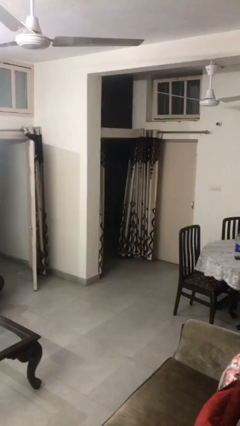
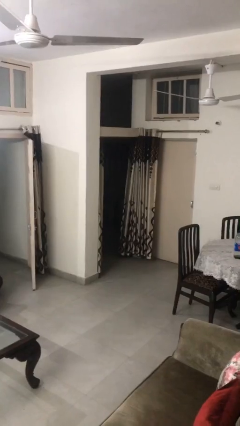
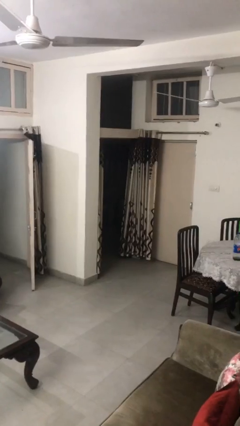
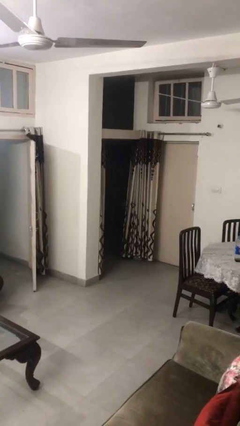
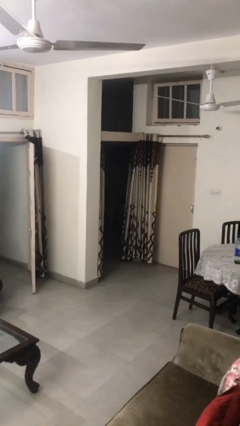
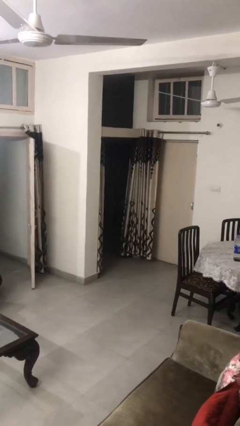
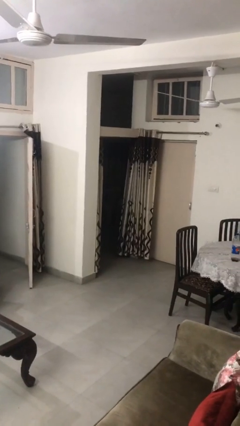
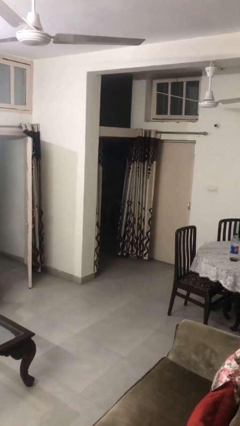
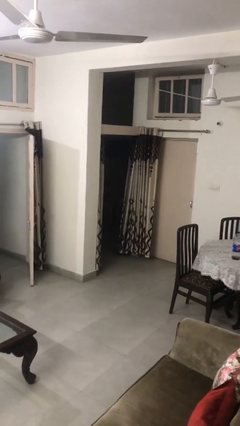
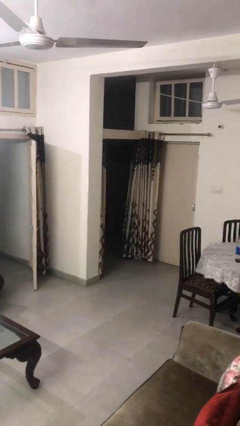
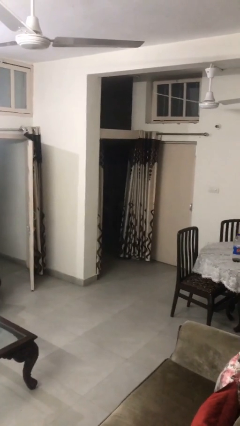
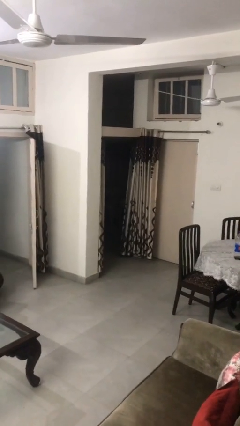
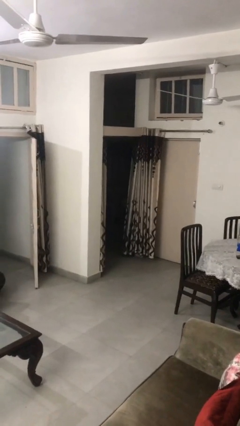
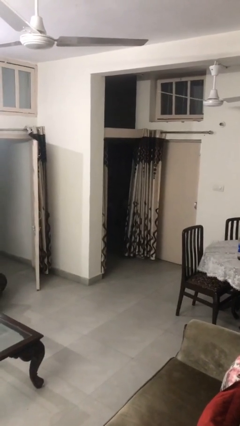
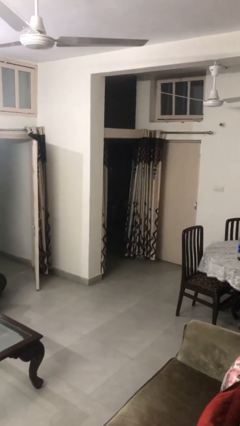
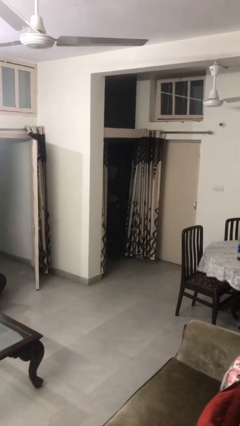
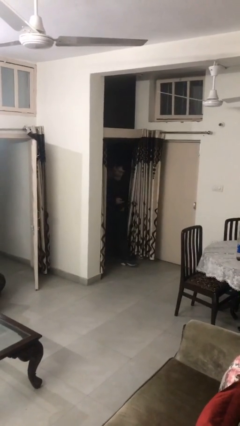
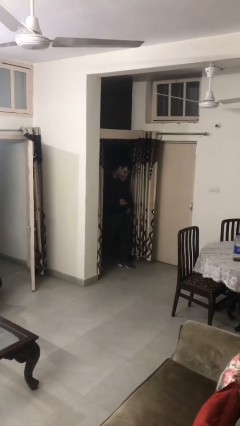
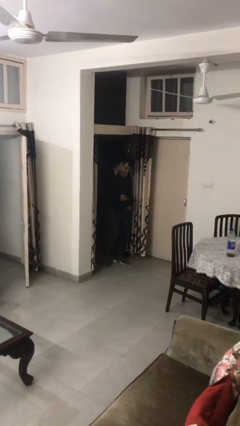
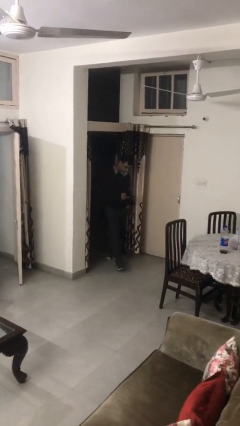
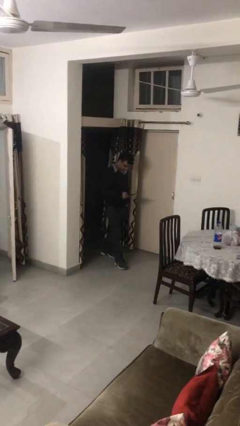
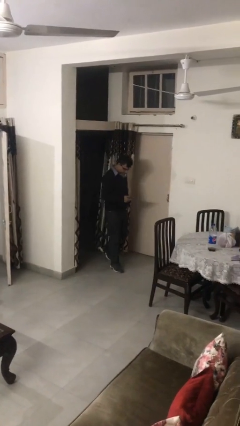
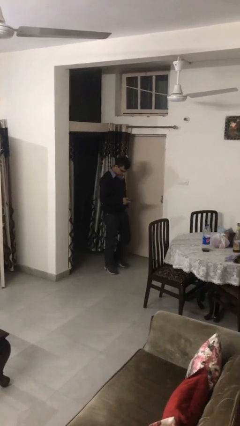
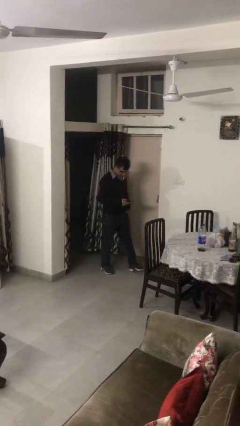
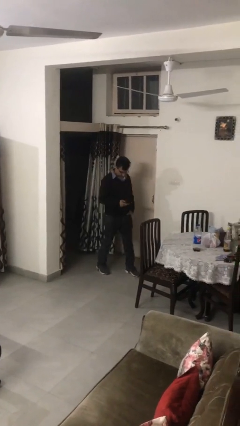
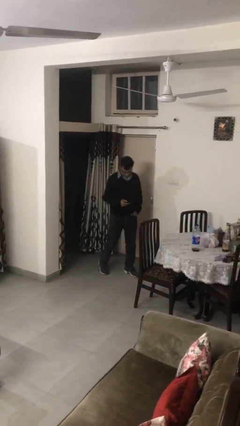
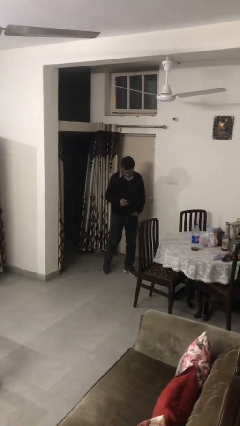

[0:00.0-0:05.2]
person enters scene through structure

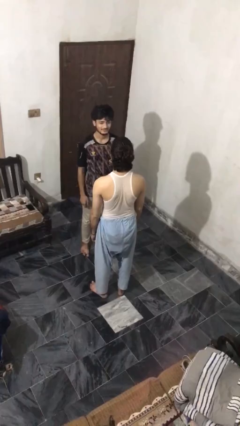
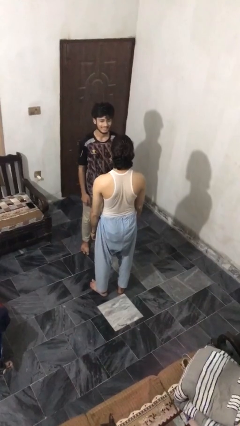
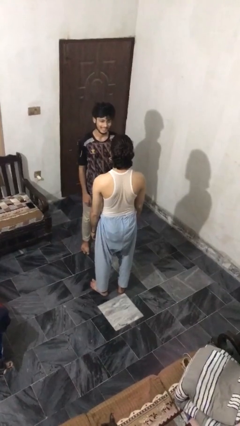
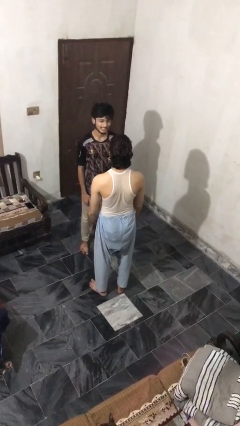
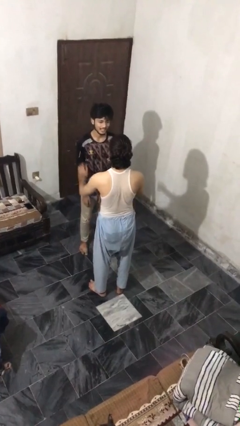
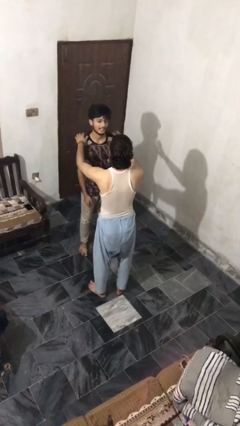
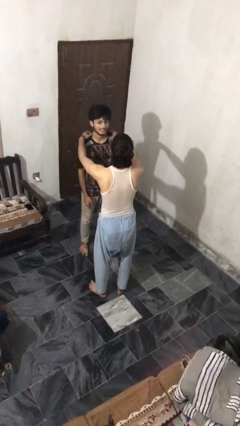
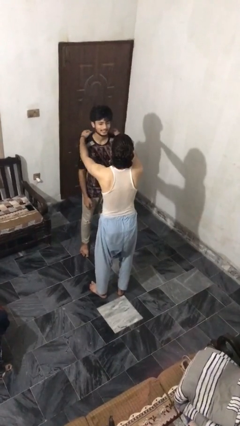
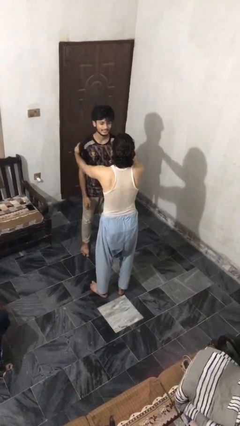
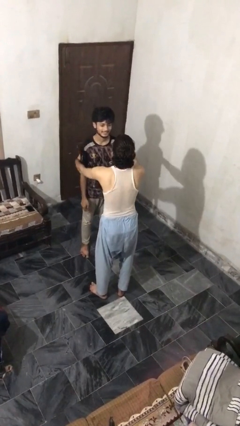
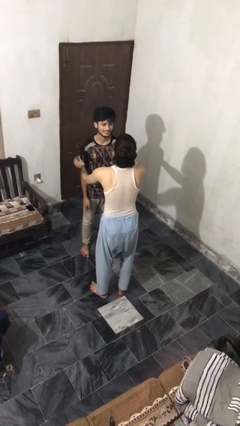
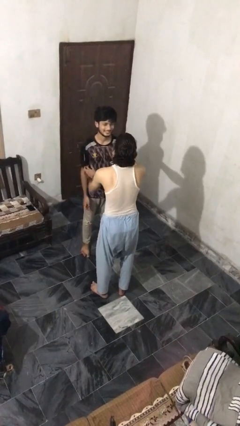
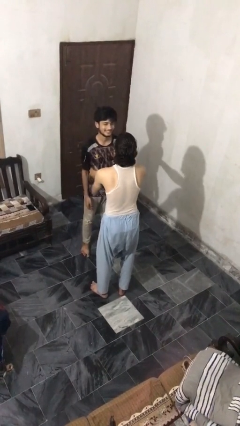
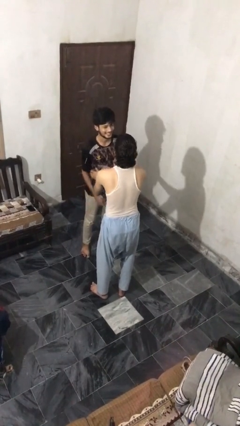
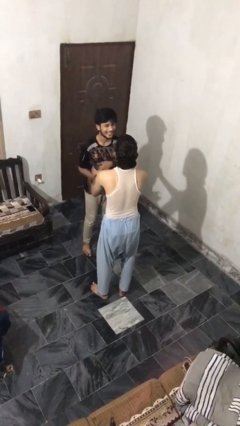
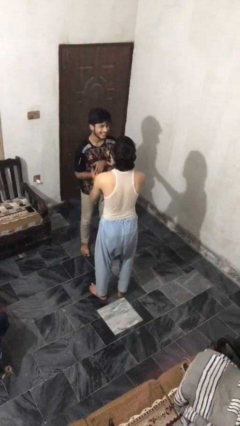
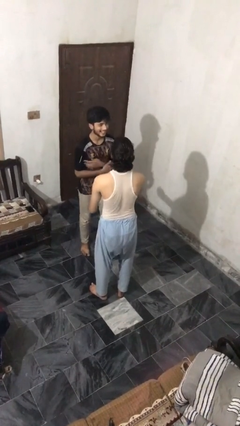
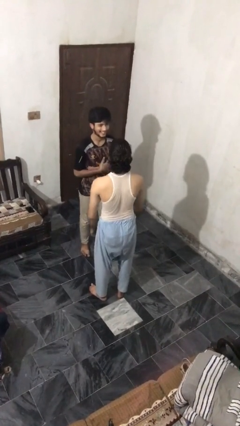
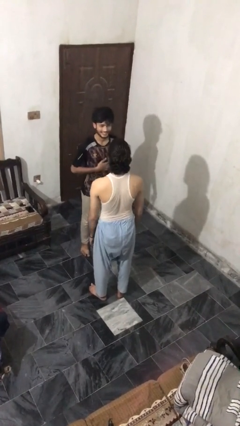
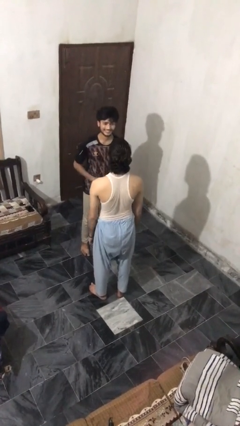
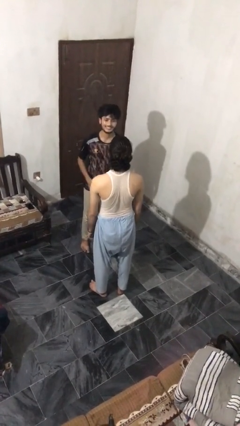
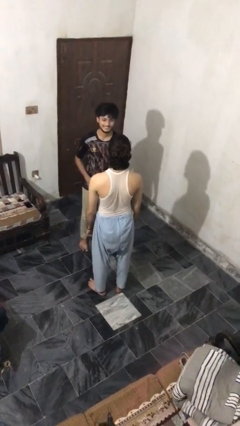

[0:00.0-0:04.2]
person tickles person

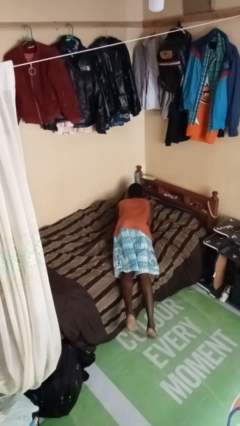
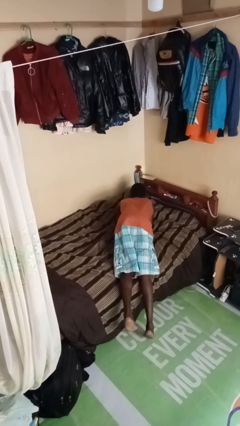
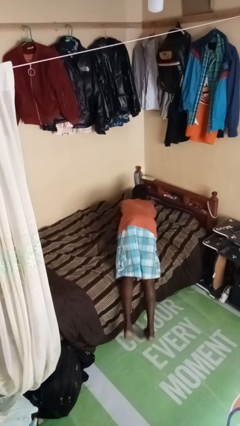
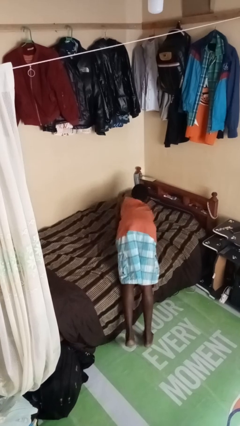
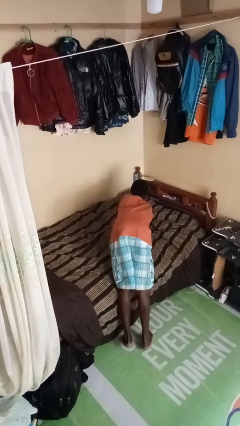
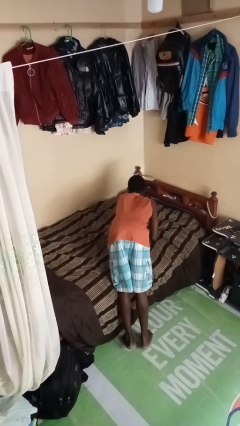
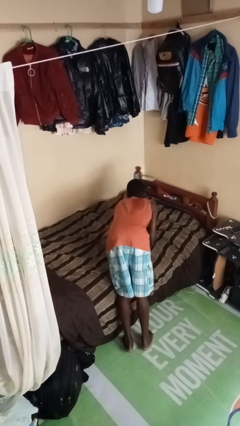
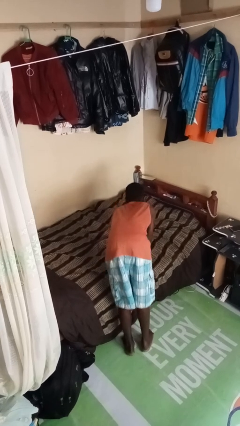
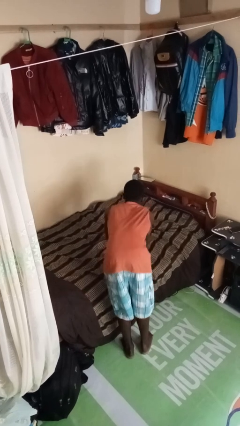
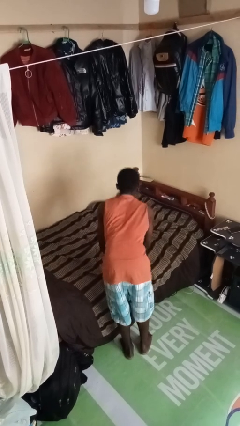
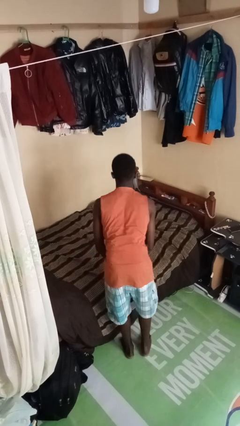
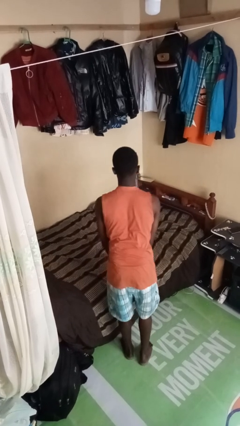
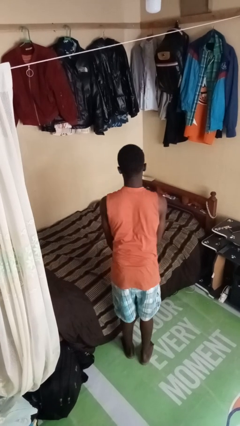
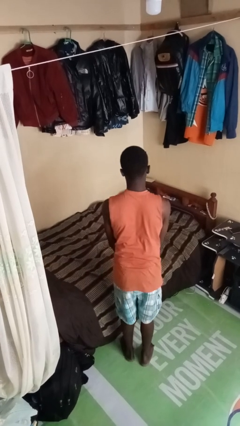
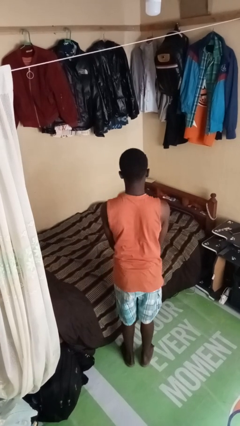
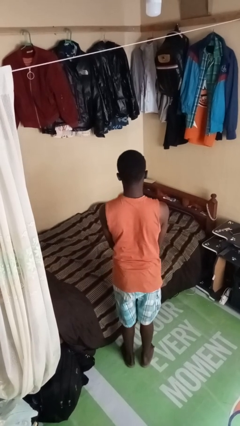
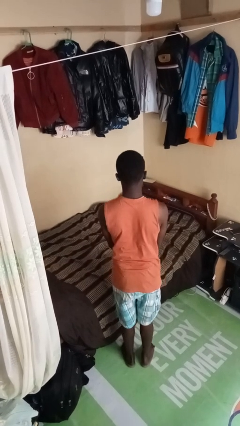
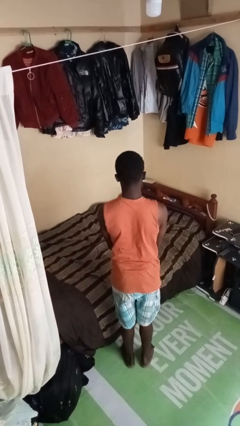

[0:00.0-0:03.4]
person stands up

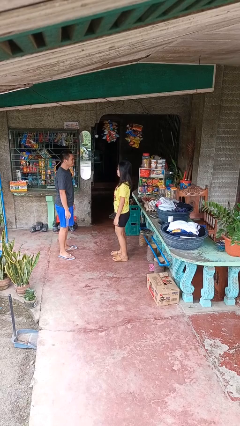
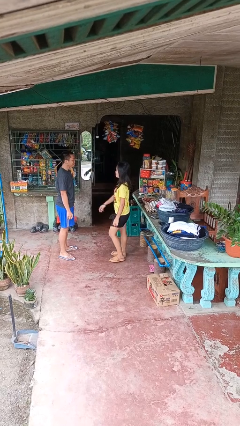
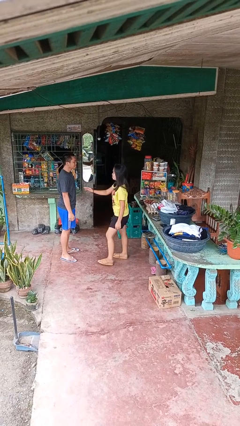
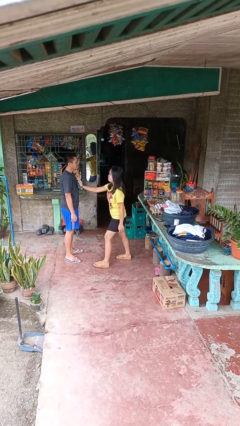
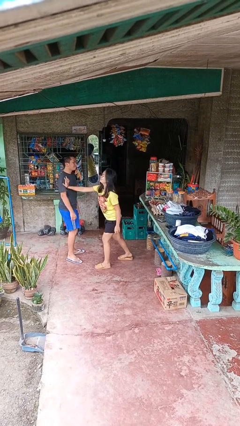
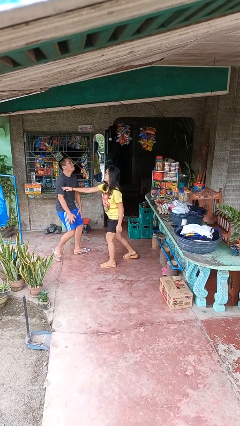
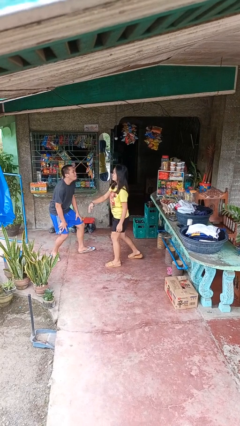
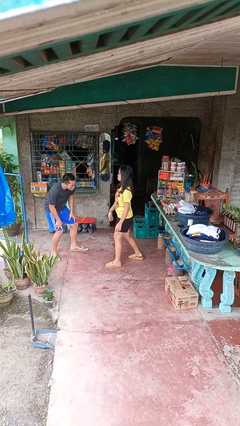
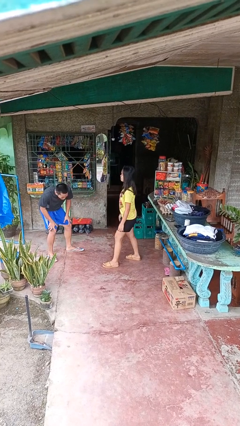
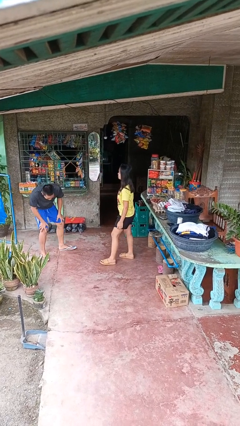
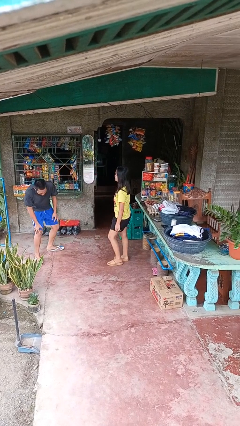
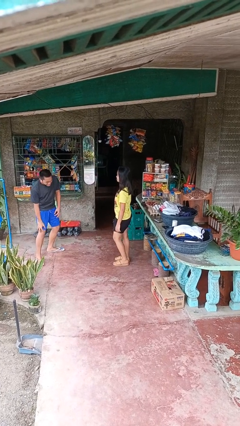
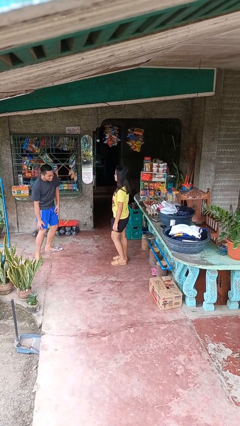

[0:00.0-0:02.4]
person shoves person

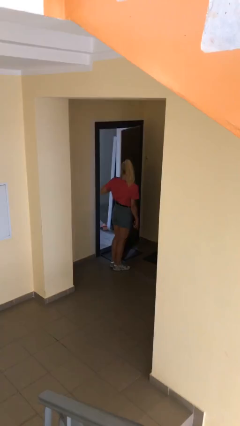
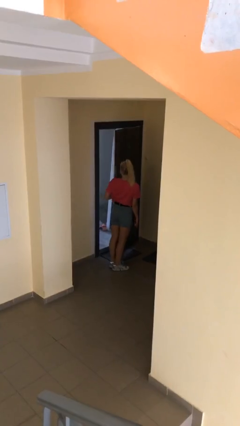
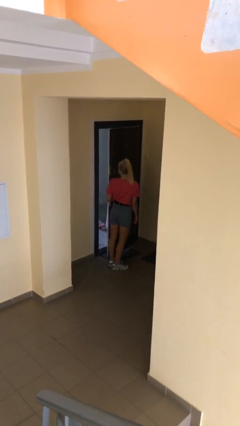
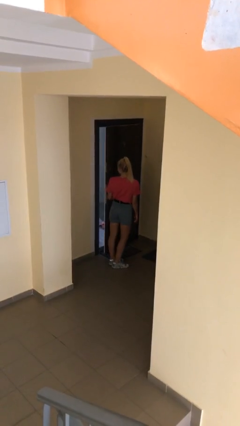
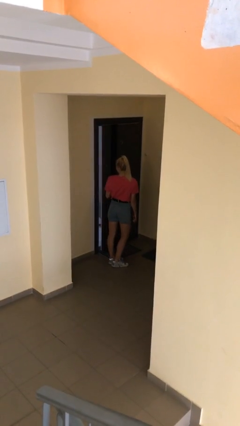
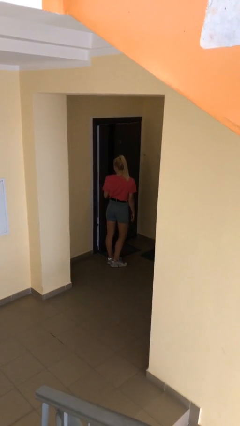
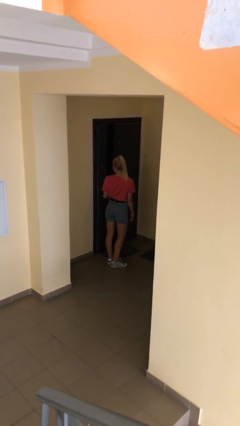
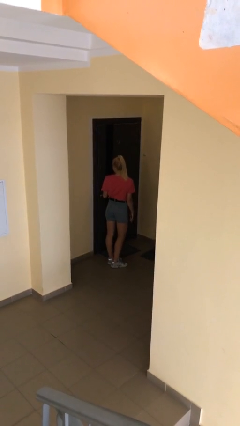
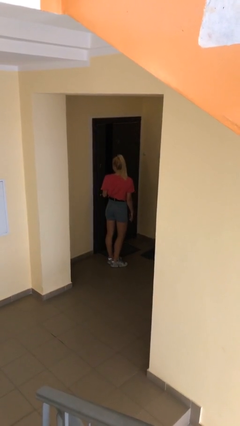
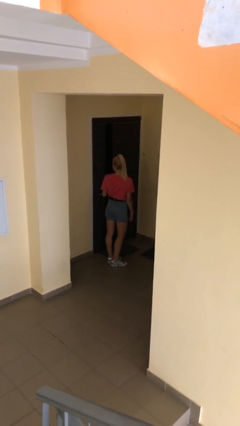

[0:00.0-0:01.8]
person closes facility door

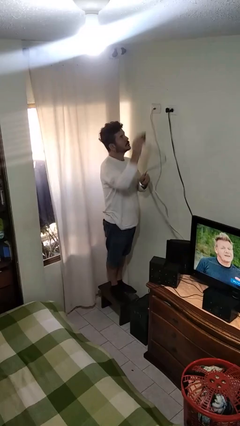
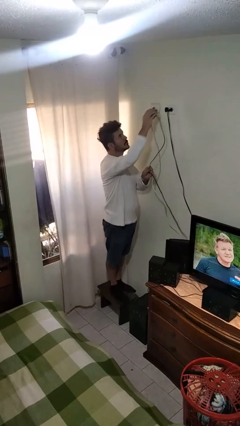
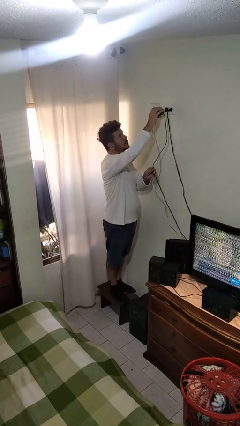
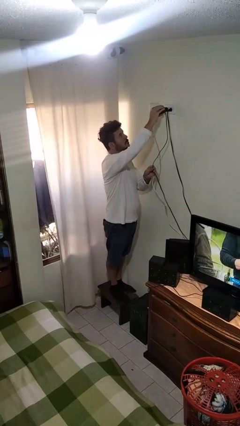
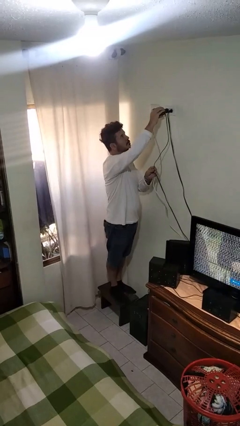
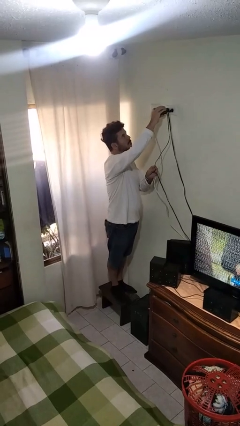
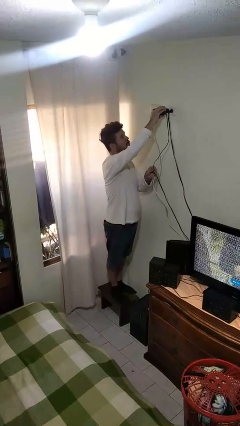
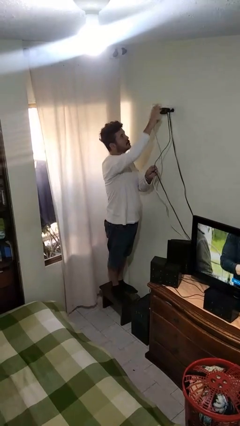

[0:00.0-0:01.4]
person plugs into electrical socket
